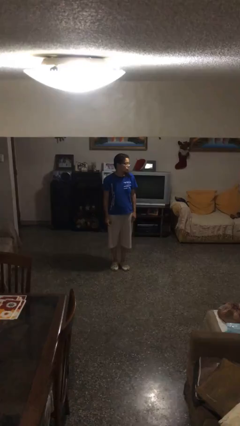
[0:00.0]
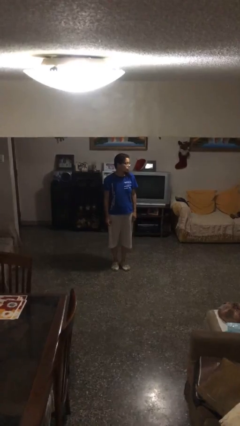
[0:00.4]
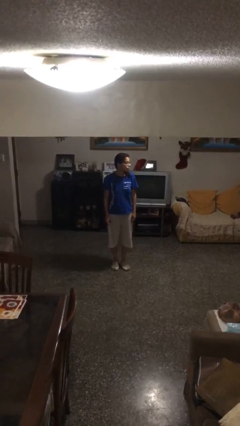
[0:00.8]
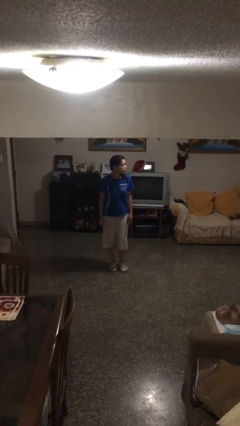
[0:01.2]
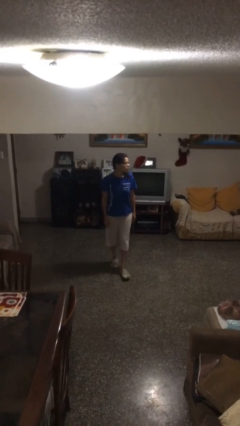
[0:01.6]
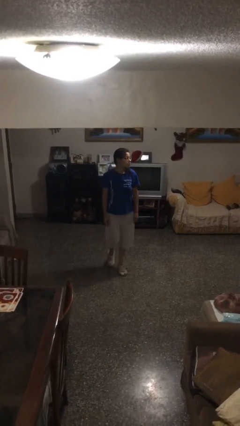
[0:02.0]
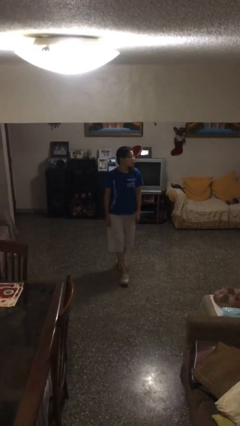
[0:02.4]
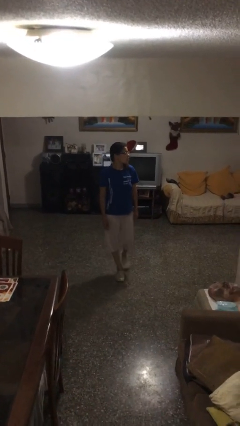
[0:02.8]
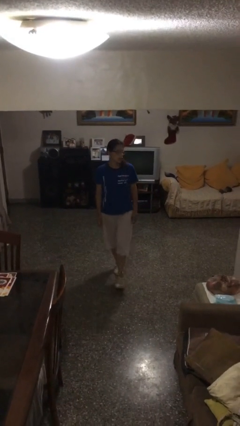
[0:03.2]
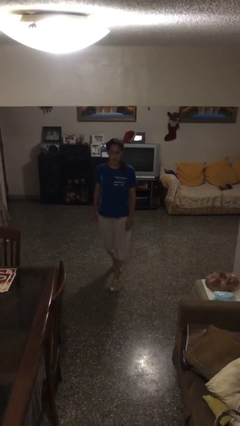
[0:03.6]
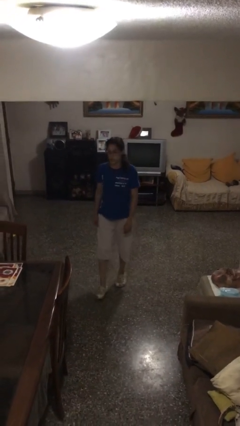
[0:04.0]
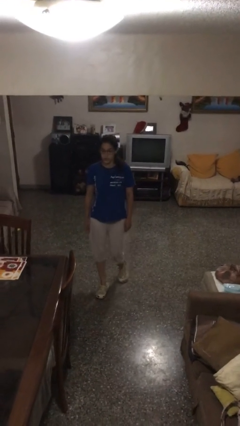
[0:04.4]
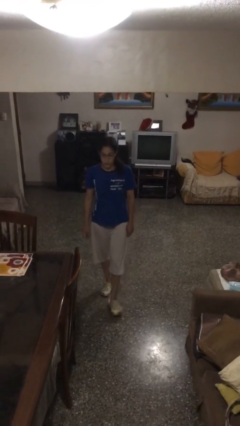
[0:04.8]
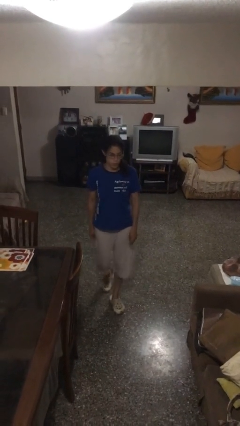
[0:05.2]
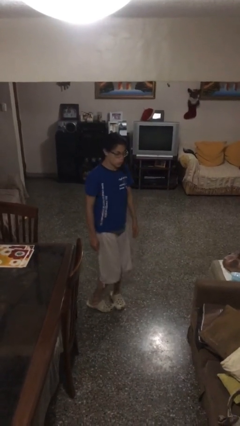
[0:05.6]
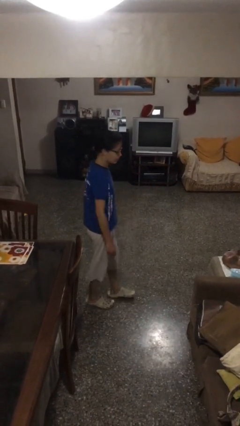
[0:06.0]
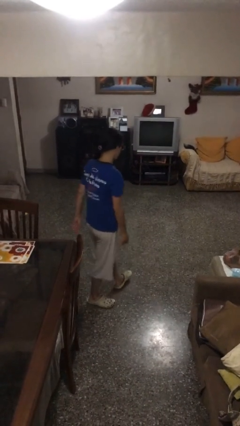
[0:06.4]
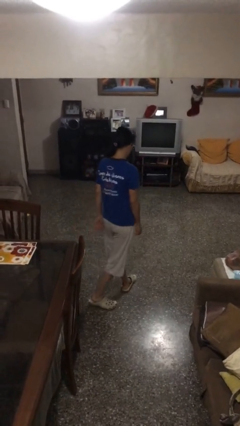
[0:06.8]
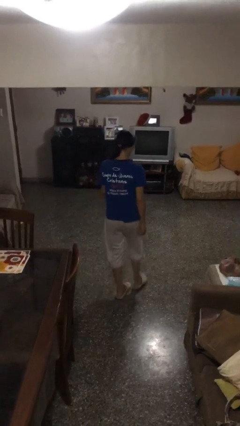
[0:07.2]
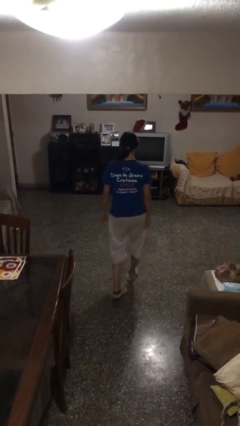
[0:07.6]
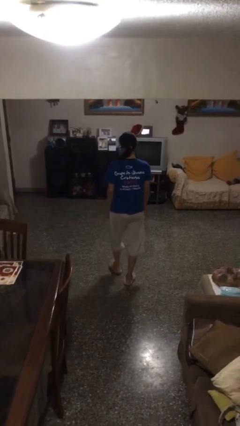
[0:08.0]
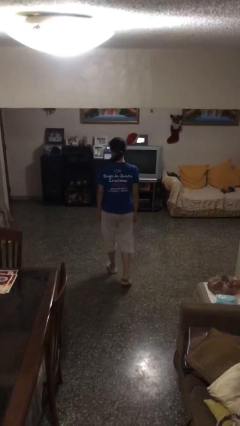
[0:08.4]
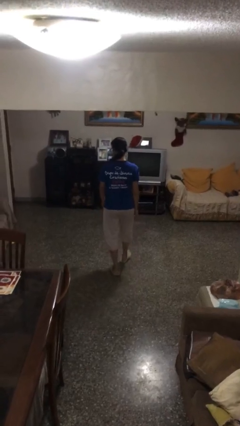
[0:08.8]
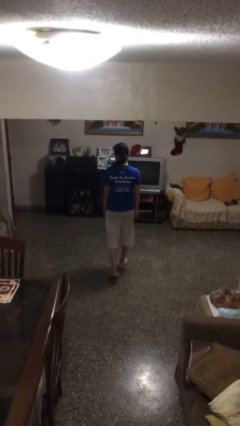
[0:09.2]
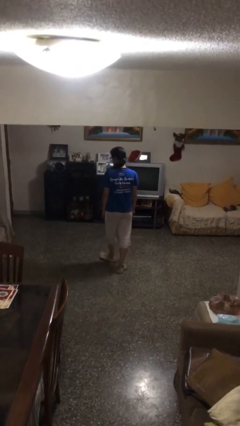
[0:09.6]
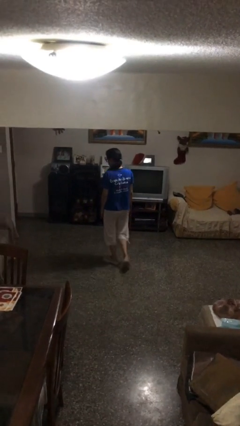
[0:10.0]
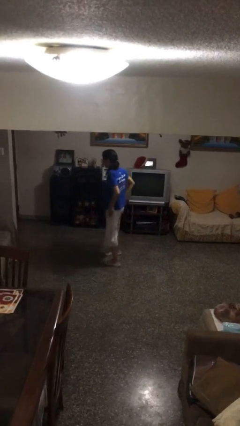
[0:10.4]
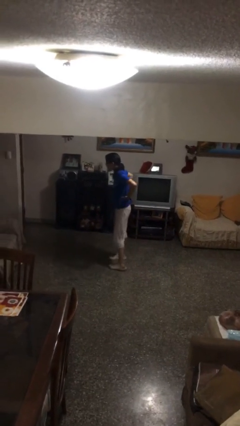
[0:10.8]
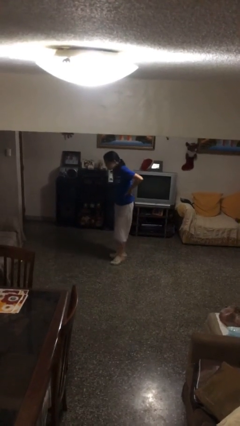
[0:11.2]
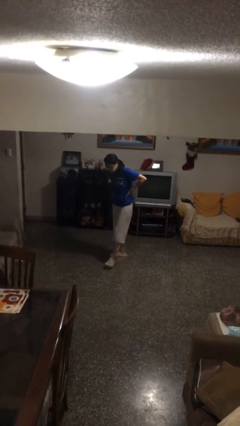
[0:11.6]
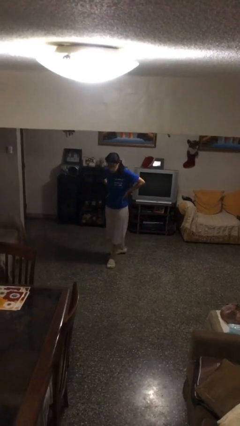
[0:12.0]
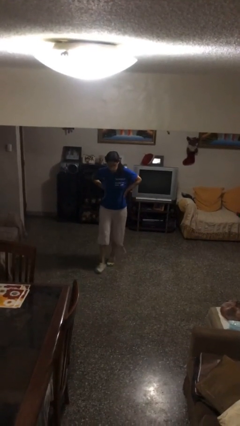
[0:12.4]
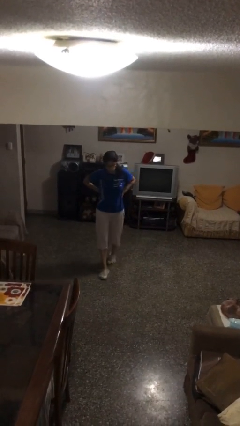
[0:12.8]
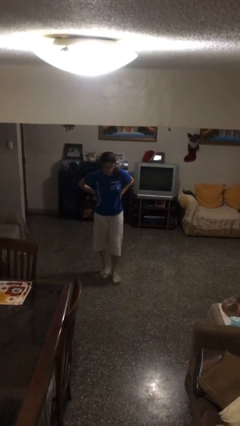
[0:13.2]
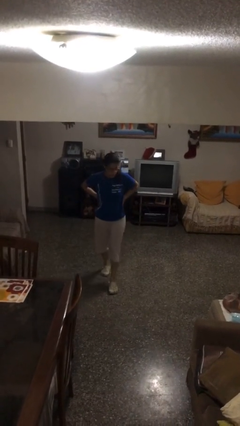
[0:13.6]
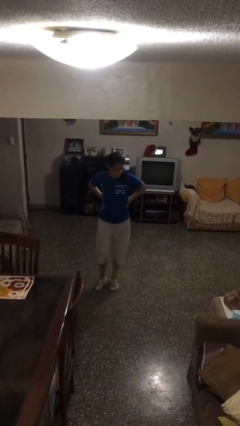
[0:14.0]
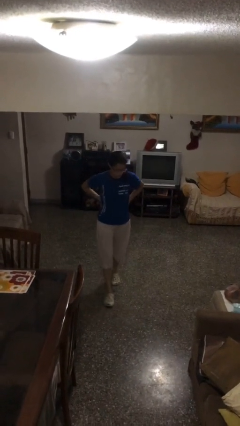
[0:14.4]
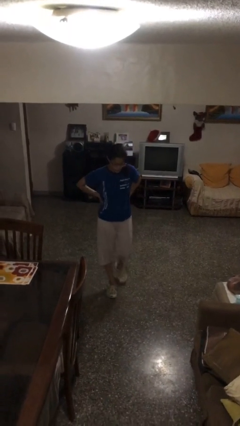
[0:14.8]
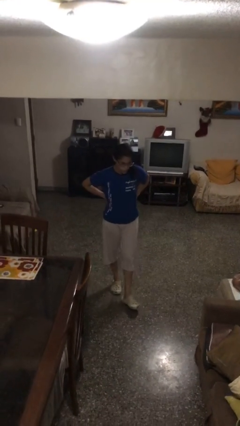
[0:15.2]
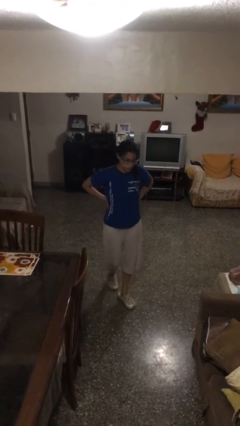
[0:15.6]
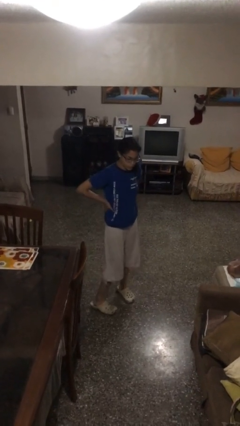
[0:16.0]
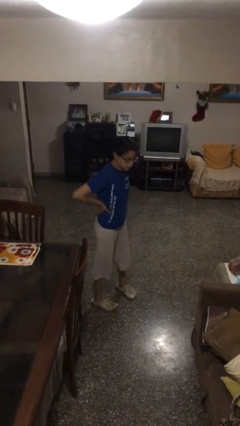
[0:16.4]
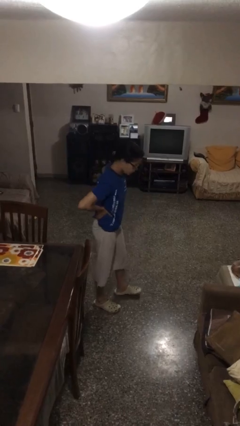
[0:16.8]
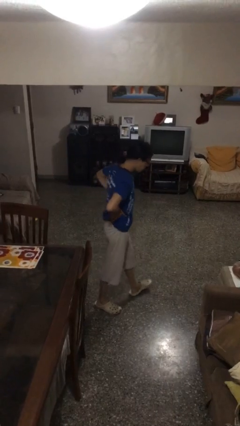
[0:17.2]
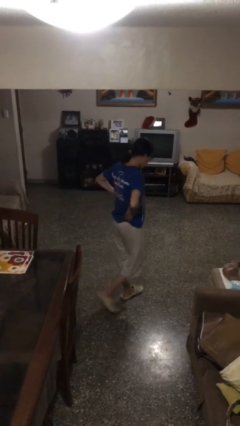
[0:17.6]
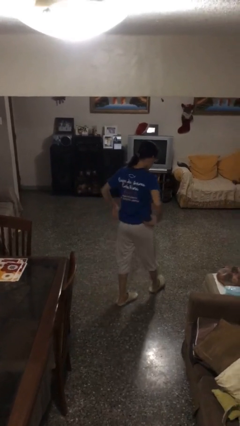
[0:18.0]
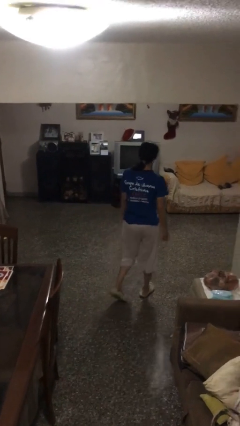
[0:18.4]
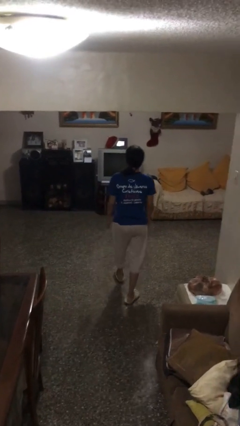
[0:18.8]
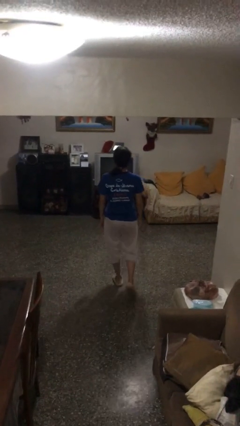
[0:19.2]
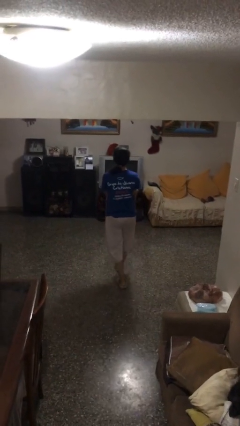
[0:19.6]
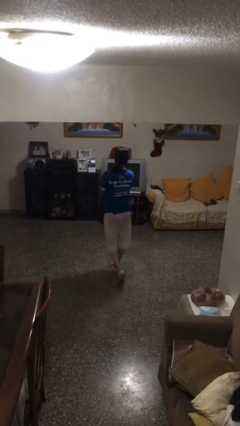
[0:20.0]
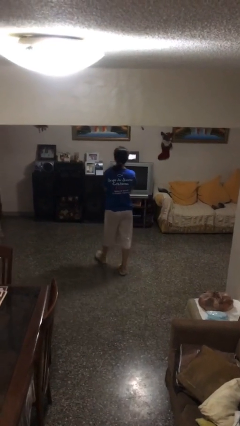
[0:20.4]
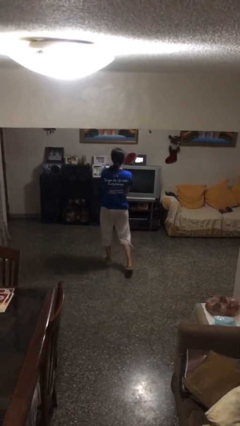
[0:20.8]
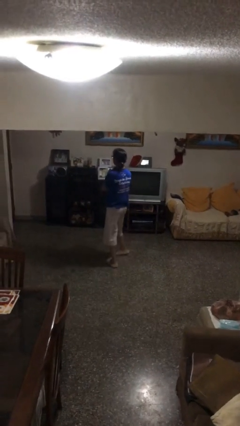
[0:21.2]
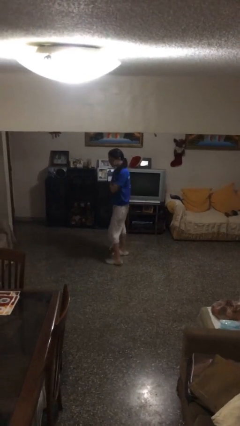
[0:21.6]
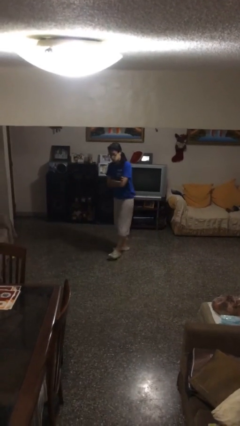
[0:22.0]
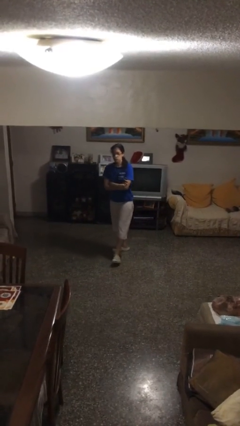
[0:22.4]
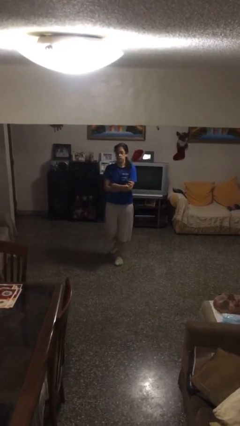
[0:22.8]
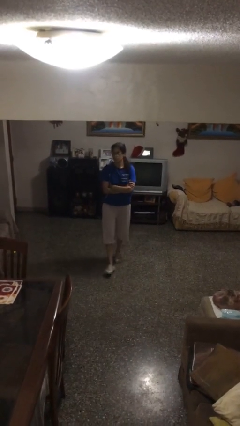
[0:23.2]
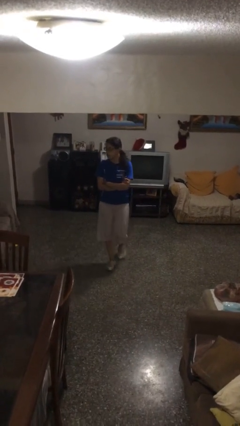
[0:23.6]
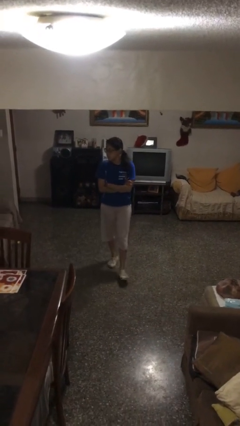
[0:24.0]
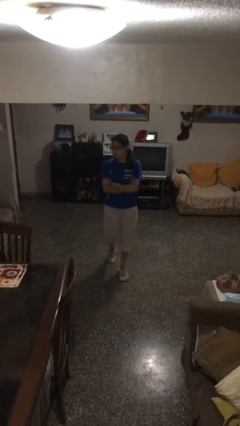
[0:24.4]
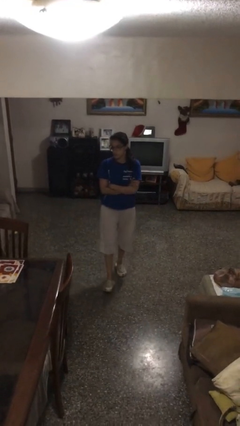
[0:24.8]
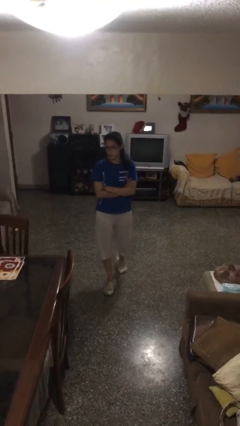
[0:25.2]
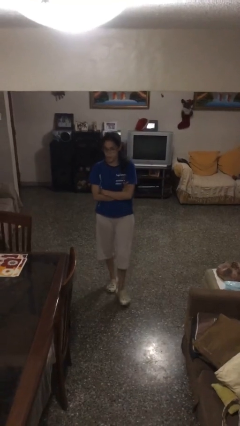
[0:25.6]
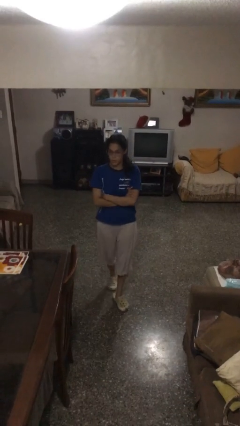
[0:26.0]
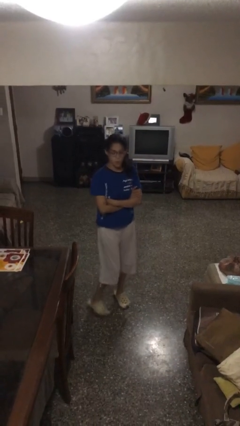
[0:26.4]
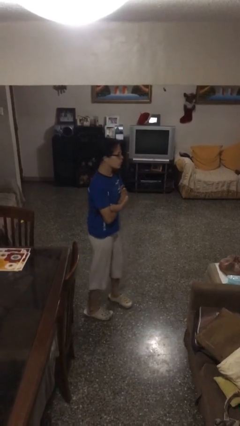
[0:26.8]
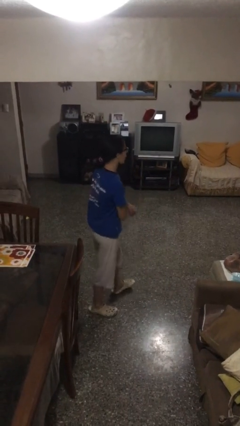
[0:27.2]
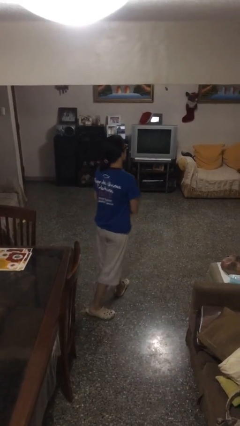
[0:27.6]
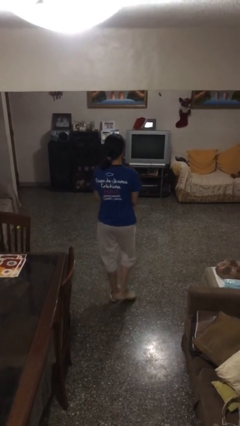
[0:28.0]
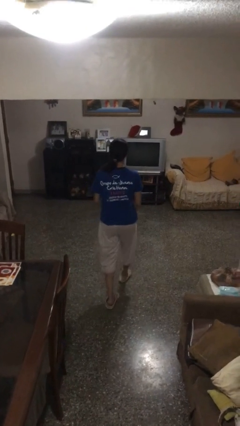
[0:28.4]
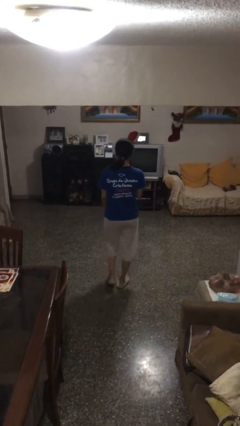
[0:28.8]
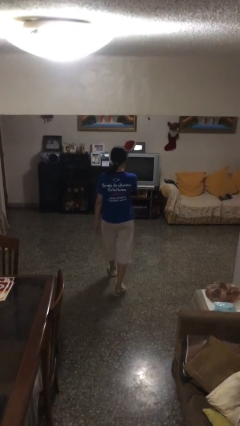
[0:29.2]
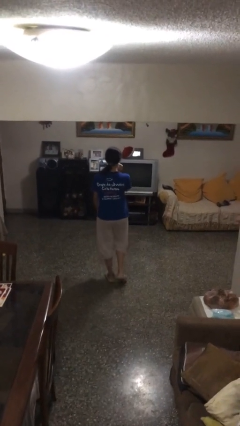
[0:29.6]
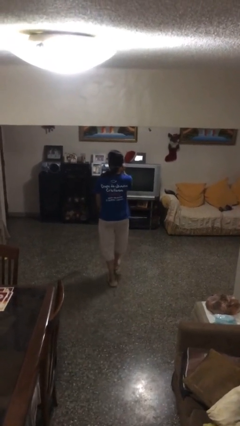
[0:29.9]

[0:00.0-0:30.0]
person walks

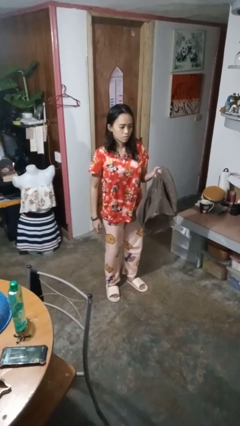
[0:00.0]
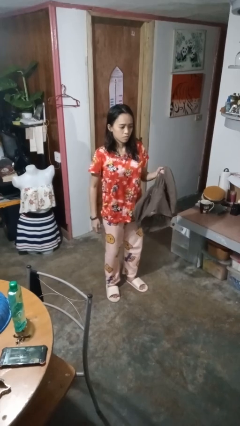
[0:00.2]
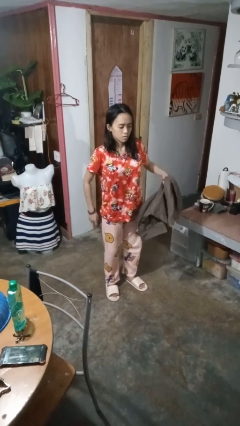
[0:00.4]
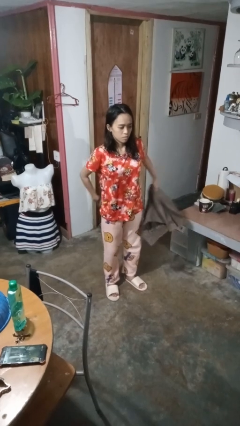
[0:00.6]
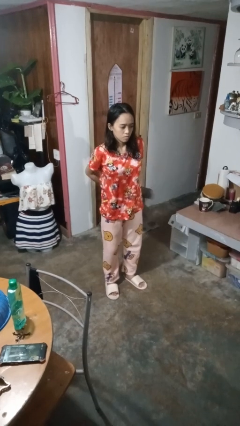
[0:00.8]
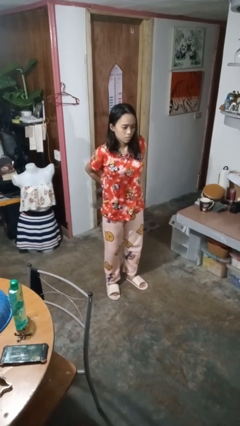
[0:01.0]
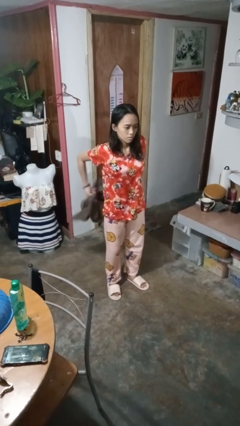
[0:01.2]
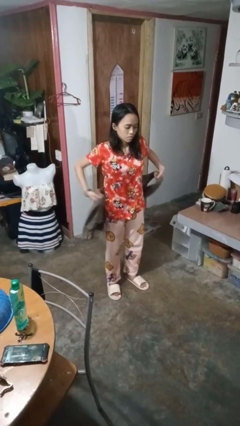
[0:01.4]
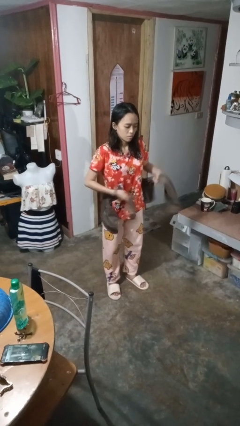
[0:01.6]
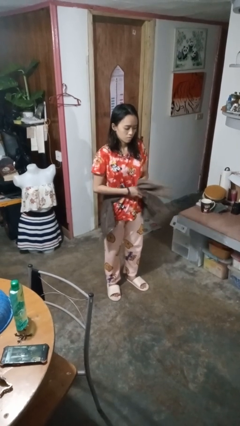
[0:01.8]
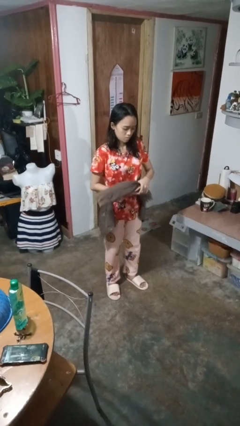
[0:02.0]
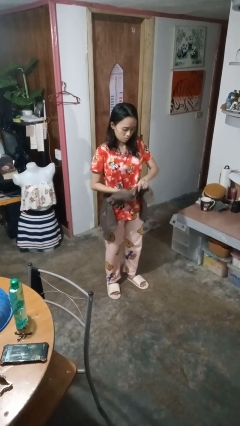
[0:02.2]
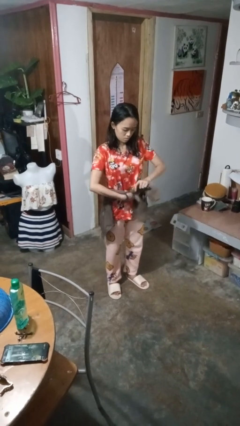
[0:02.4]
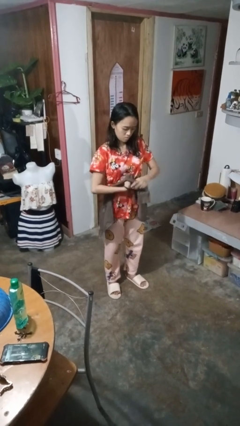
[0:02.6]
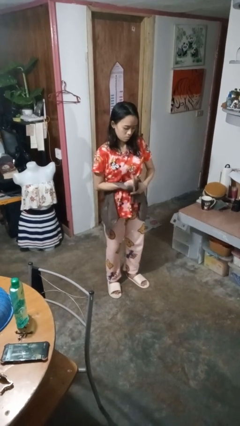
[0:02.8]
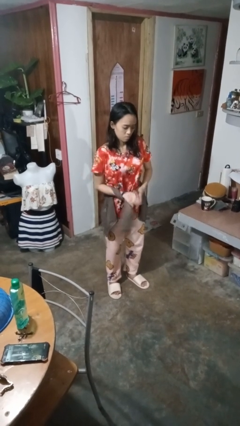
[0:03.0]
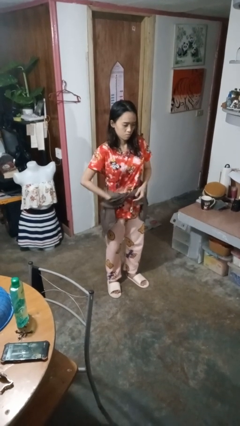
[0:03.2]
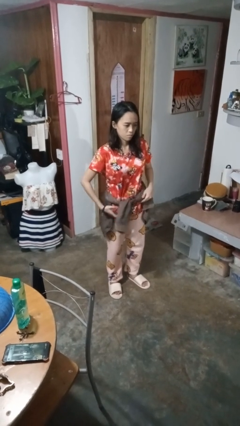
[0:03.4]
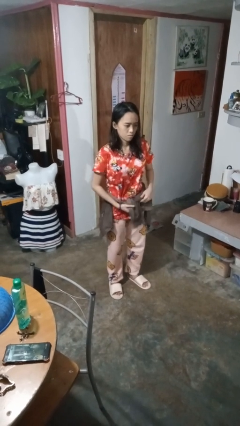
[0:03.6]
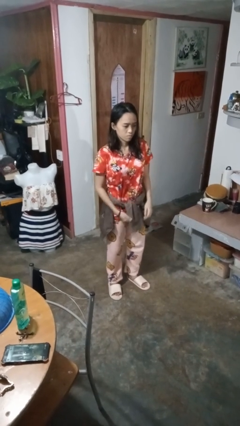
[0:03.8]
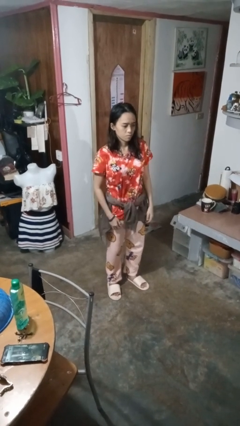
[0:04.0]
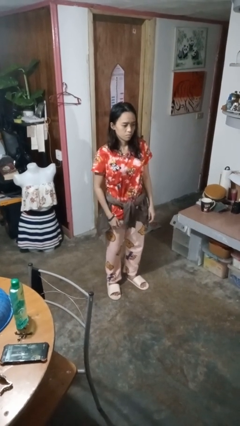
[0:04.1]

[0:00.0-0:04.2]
person ties jacket around waist
